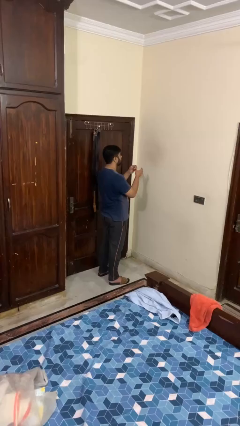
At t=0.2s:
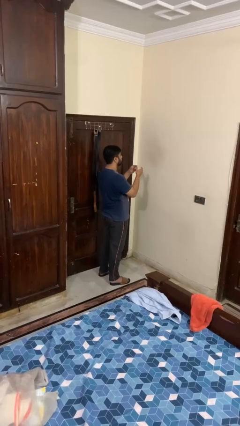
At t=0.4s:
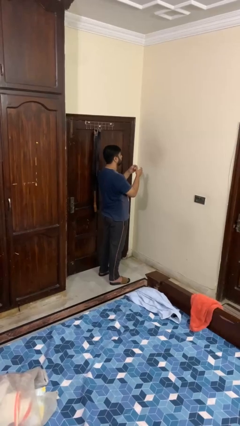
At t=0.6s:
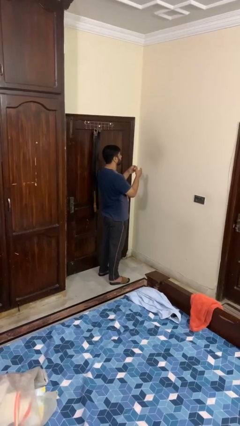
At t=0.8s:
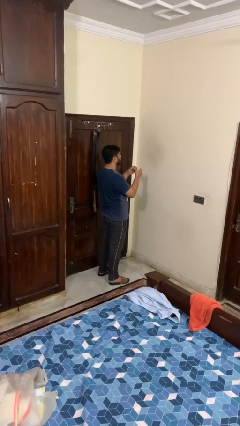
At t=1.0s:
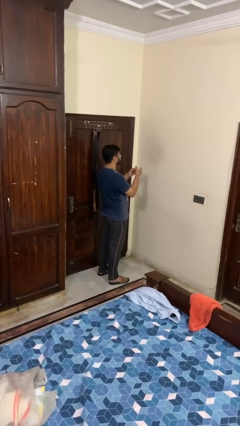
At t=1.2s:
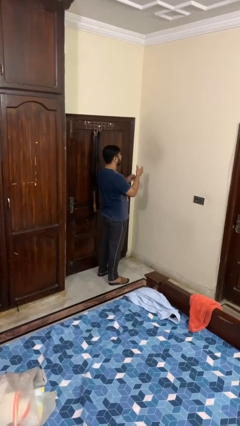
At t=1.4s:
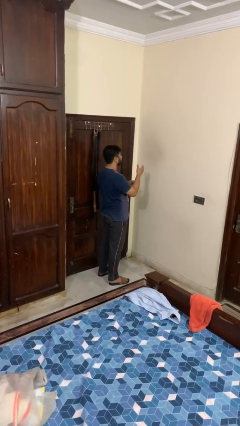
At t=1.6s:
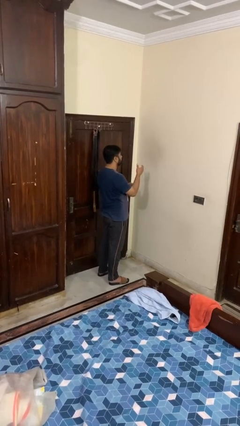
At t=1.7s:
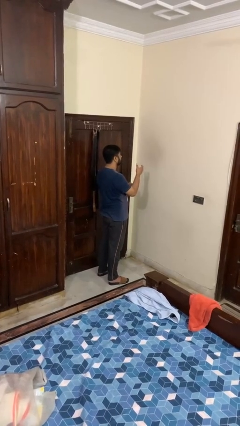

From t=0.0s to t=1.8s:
person puts on ring

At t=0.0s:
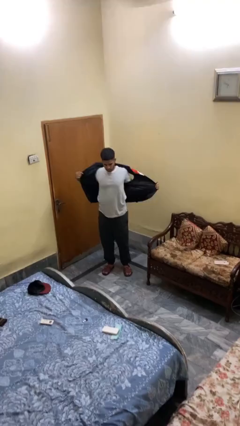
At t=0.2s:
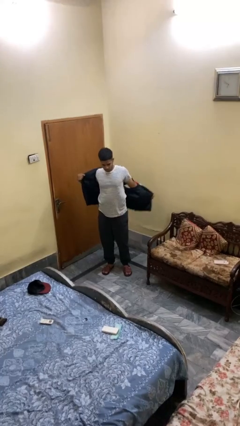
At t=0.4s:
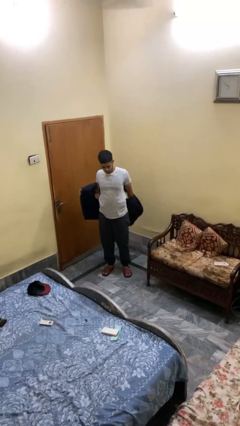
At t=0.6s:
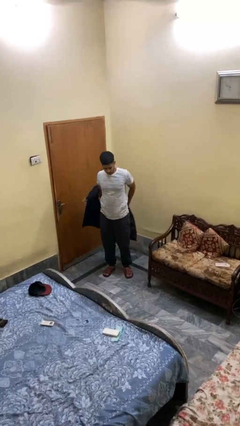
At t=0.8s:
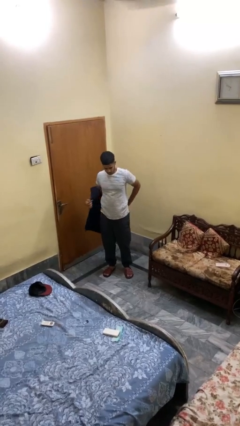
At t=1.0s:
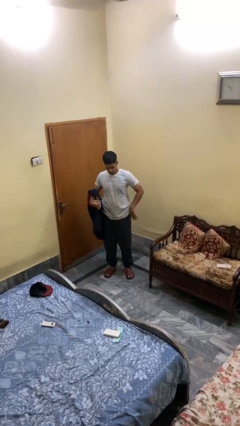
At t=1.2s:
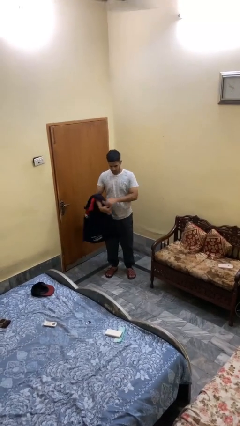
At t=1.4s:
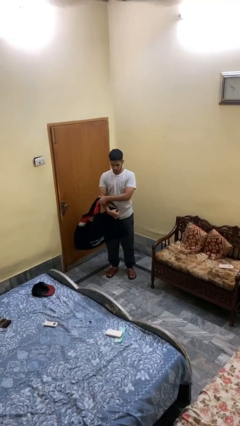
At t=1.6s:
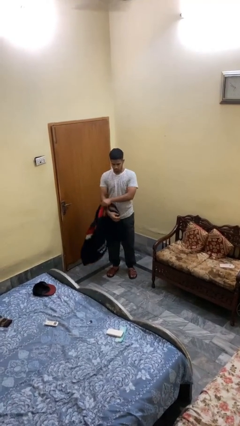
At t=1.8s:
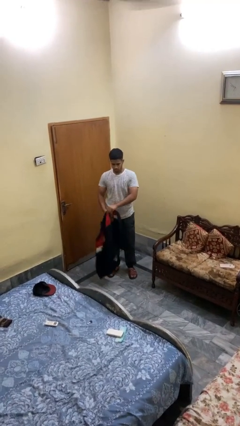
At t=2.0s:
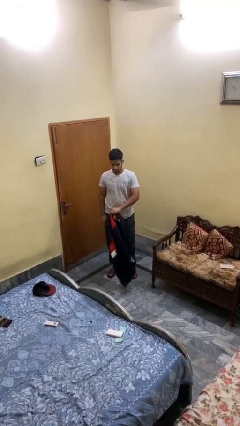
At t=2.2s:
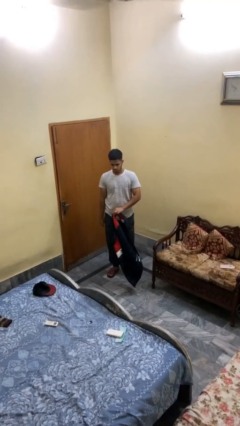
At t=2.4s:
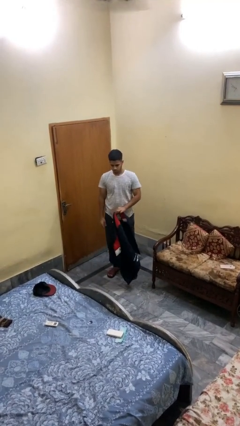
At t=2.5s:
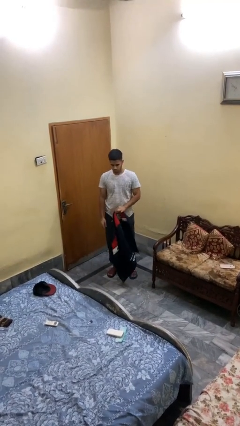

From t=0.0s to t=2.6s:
person takes off jacket

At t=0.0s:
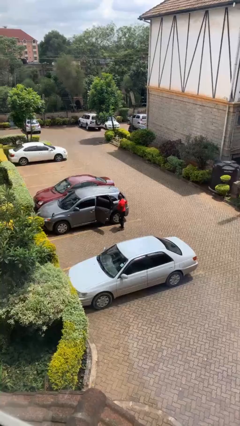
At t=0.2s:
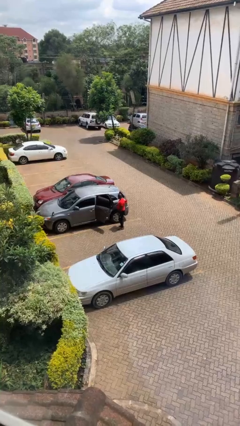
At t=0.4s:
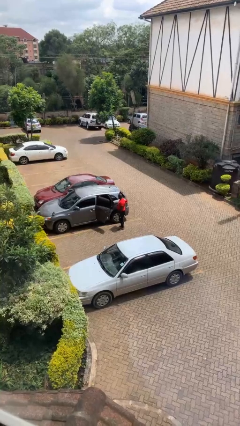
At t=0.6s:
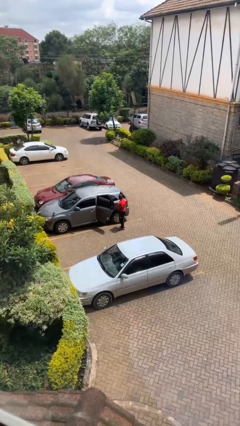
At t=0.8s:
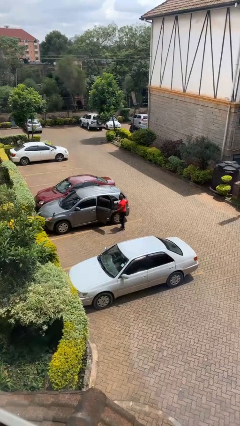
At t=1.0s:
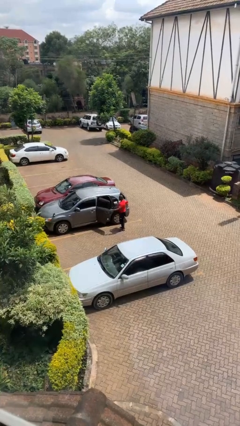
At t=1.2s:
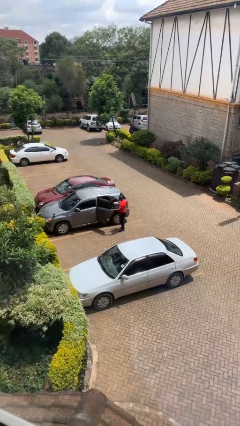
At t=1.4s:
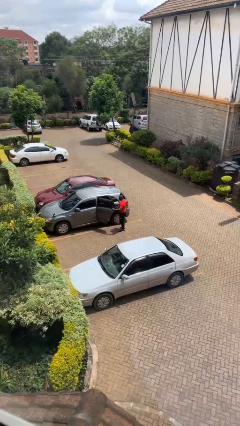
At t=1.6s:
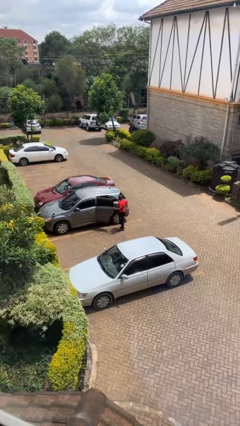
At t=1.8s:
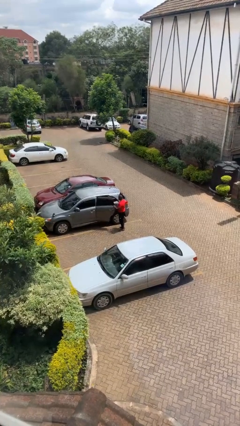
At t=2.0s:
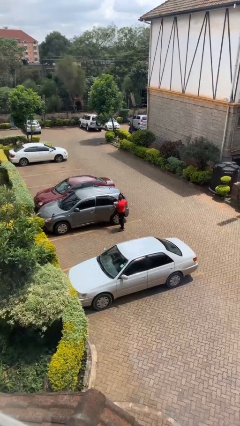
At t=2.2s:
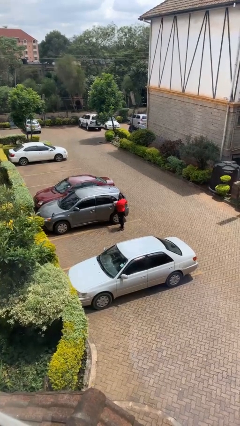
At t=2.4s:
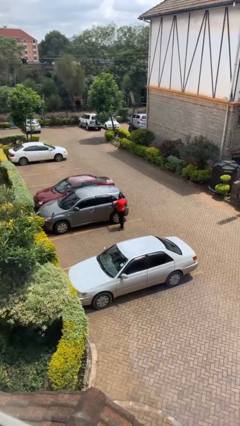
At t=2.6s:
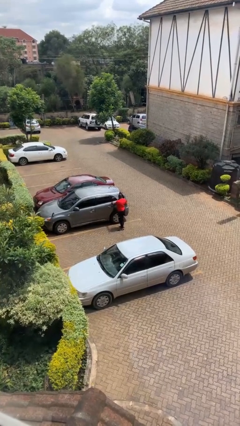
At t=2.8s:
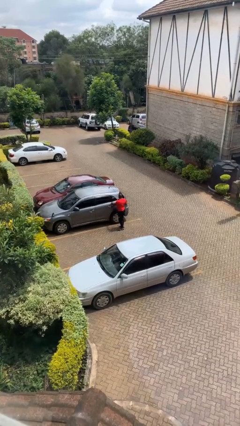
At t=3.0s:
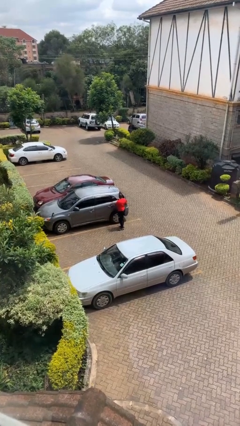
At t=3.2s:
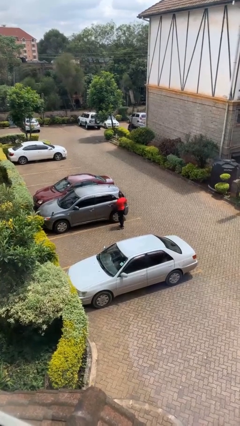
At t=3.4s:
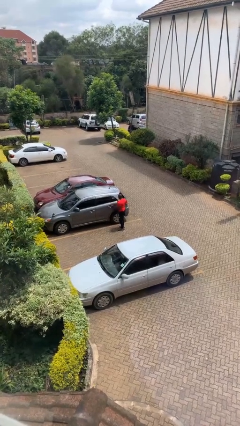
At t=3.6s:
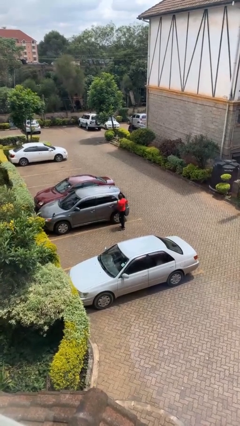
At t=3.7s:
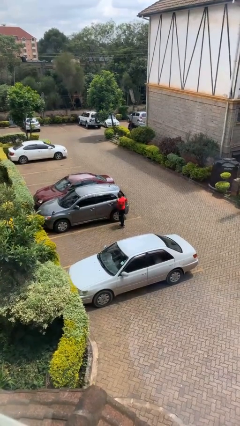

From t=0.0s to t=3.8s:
person closes car door

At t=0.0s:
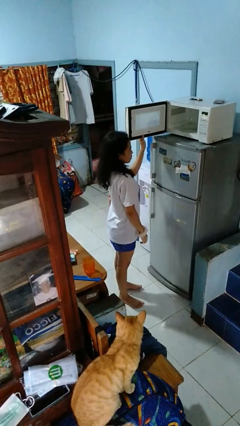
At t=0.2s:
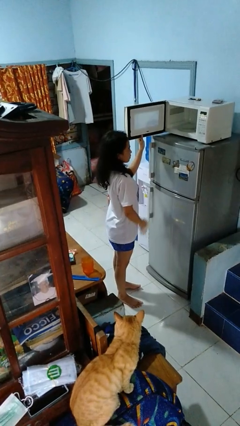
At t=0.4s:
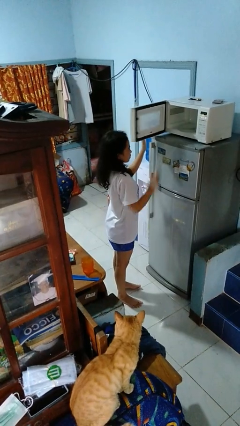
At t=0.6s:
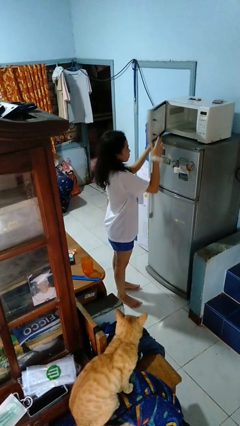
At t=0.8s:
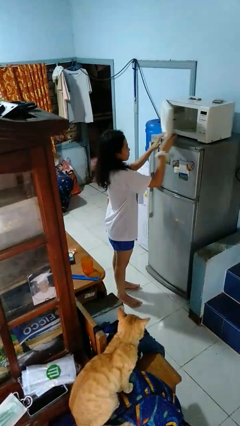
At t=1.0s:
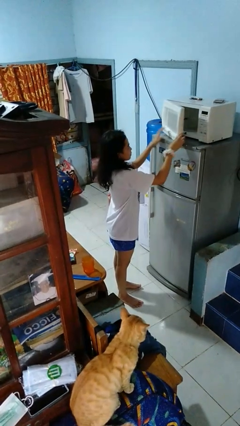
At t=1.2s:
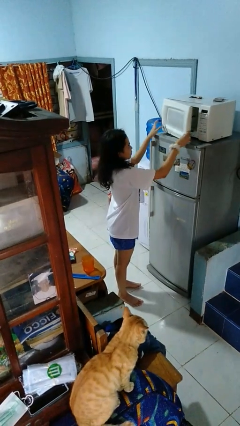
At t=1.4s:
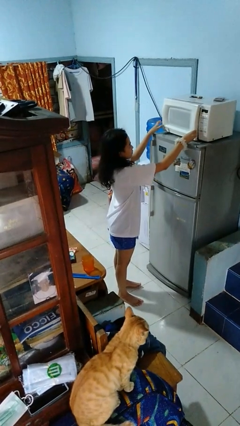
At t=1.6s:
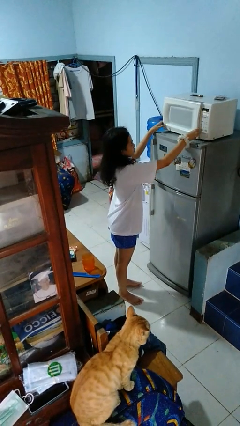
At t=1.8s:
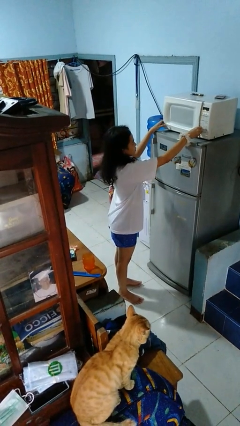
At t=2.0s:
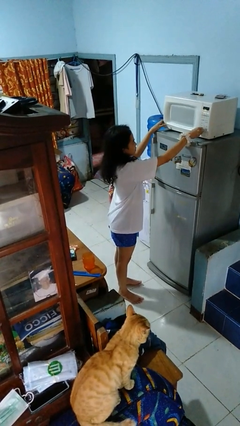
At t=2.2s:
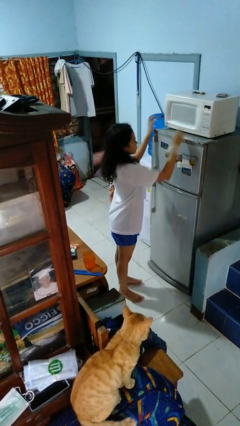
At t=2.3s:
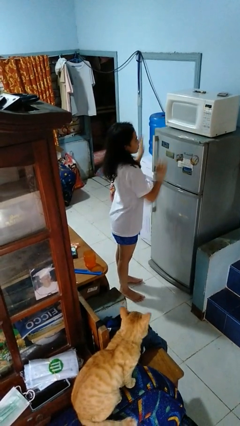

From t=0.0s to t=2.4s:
person closes microwave

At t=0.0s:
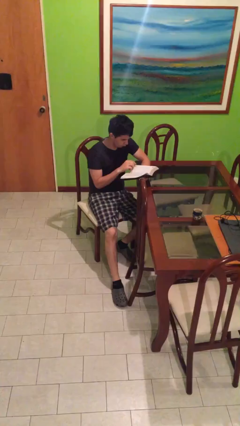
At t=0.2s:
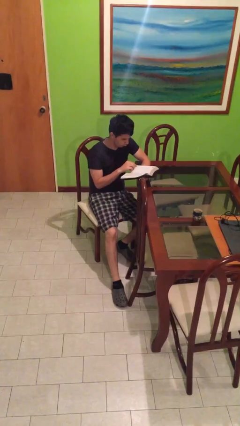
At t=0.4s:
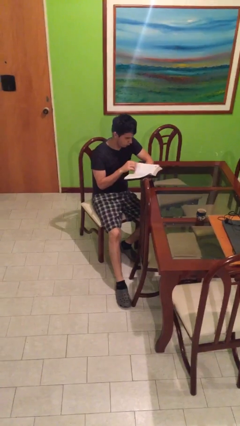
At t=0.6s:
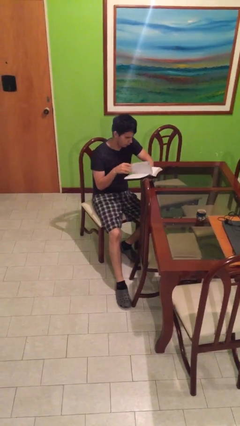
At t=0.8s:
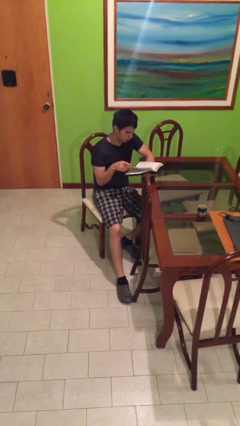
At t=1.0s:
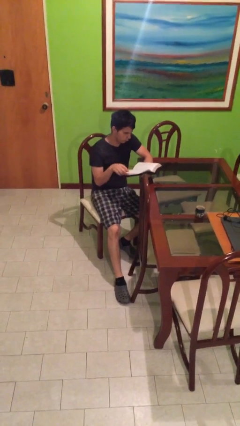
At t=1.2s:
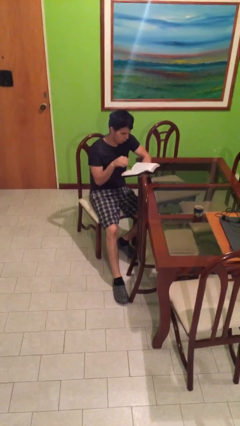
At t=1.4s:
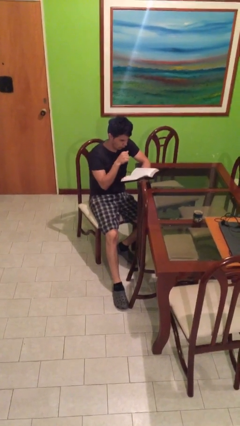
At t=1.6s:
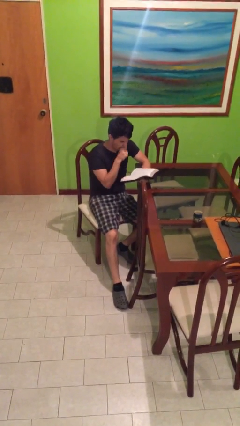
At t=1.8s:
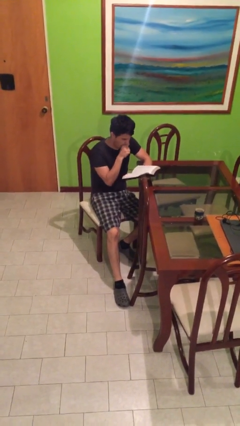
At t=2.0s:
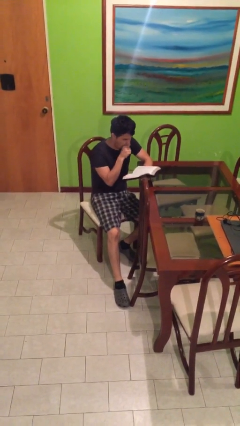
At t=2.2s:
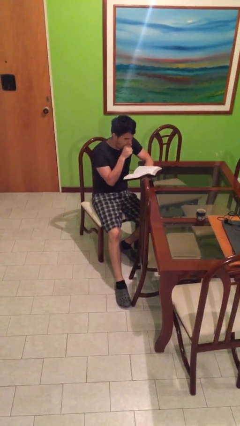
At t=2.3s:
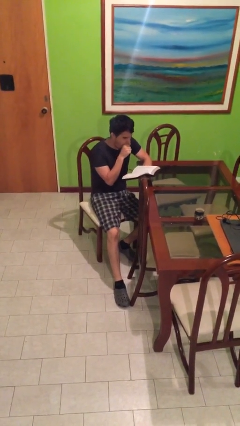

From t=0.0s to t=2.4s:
person reads document

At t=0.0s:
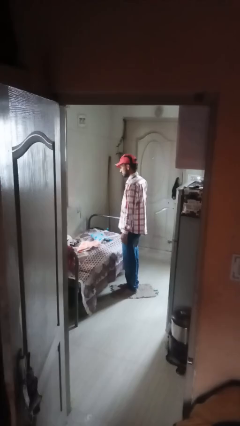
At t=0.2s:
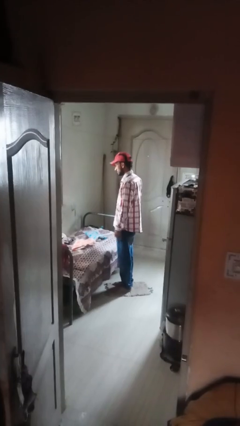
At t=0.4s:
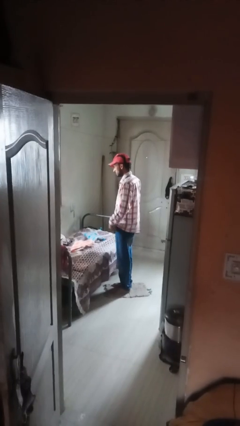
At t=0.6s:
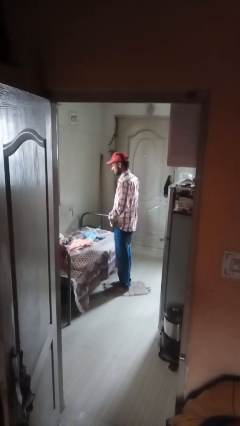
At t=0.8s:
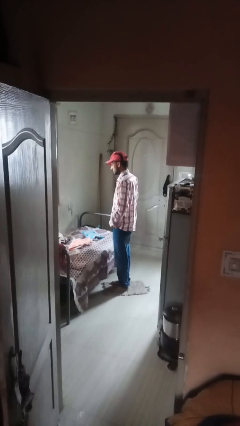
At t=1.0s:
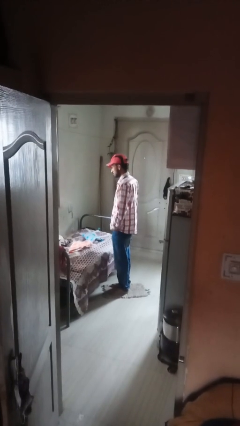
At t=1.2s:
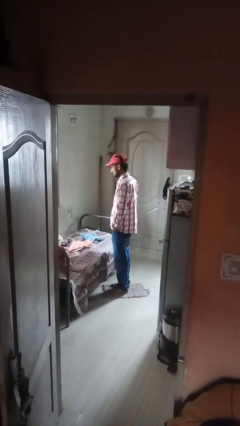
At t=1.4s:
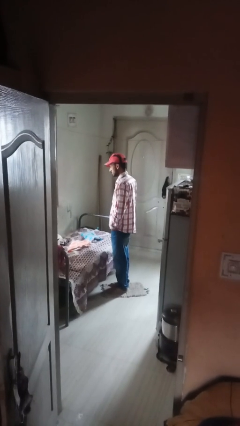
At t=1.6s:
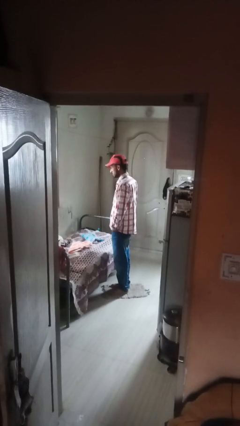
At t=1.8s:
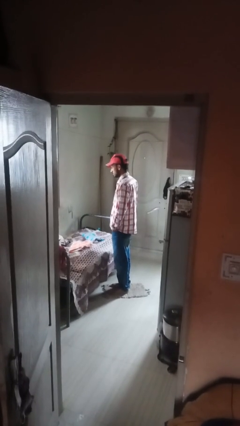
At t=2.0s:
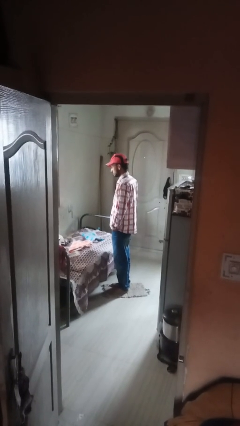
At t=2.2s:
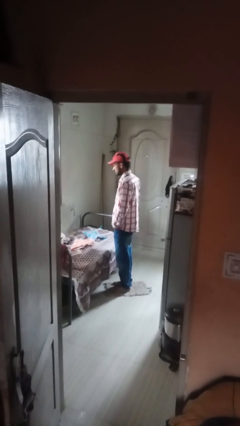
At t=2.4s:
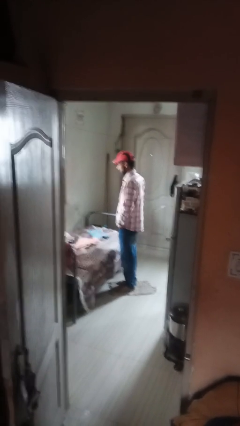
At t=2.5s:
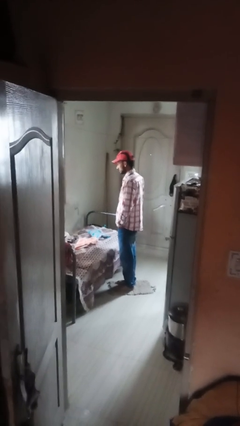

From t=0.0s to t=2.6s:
person puts hands in back pockets

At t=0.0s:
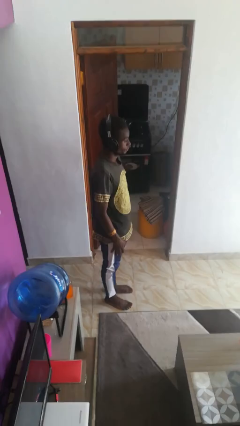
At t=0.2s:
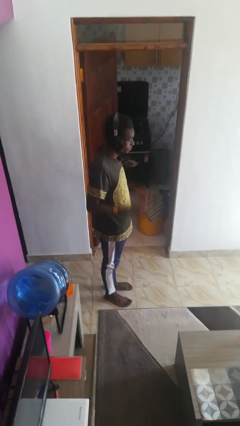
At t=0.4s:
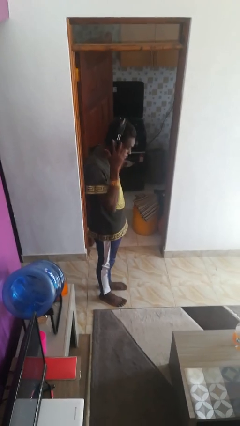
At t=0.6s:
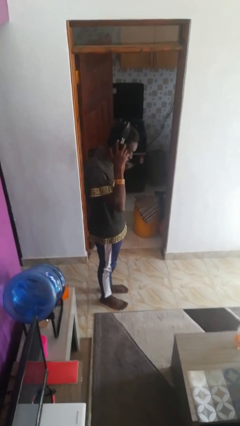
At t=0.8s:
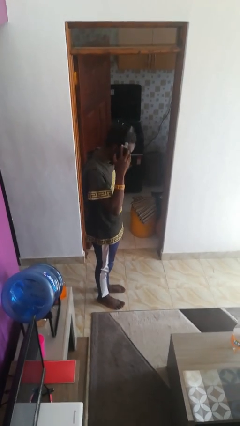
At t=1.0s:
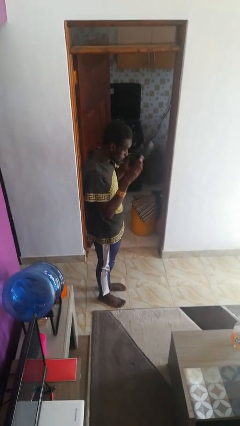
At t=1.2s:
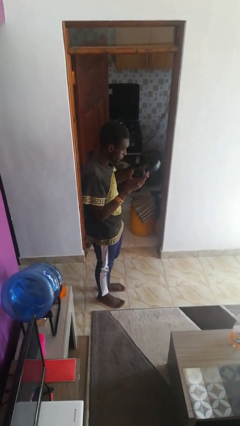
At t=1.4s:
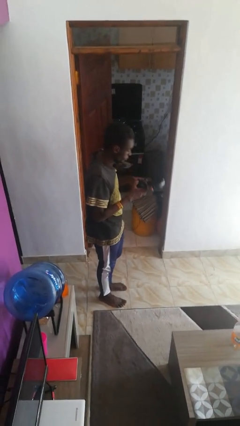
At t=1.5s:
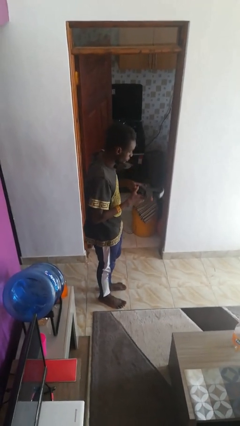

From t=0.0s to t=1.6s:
person takes off headphones
